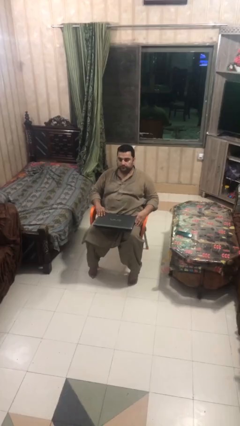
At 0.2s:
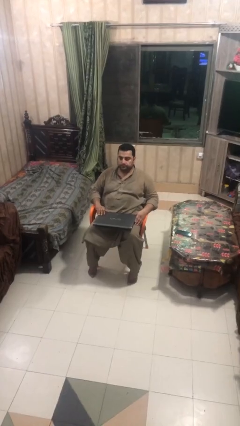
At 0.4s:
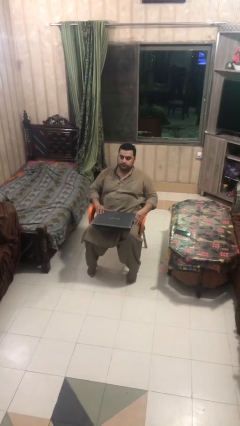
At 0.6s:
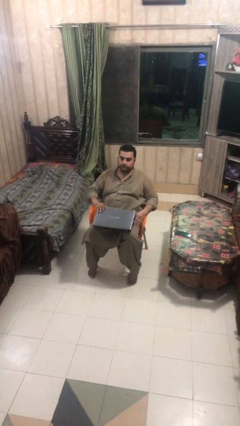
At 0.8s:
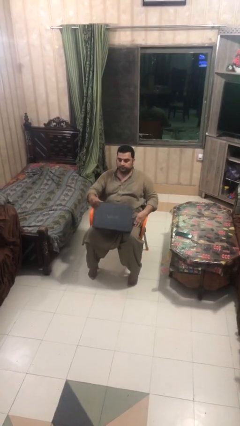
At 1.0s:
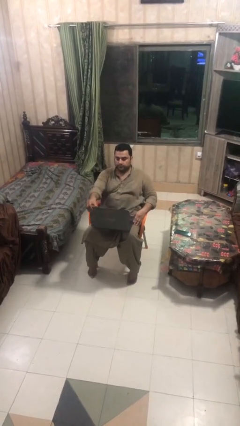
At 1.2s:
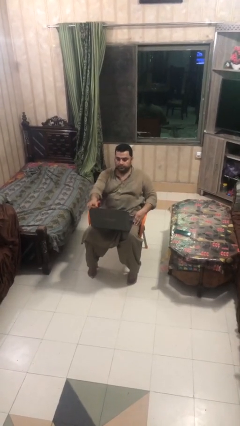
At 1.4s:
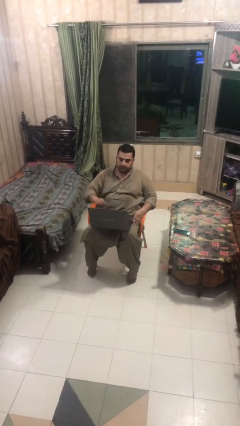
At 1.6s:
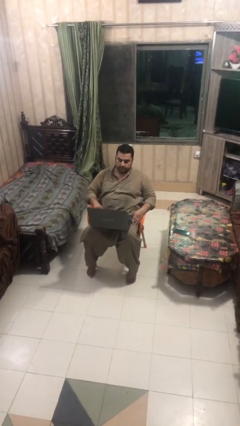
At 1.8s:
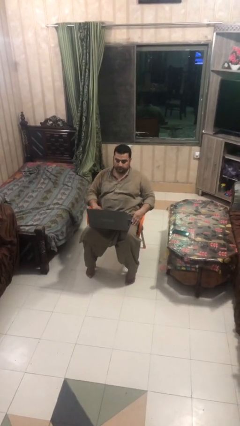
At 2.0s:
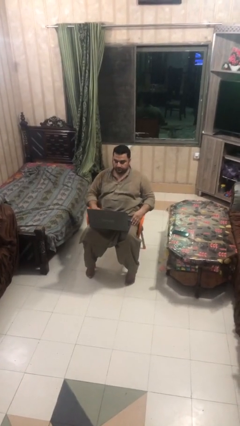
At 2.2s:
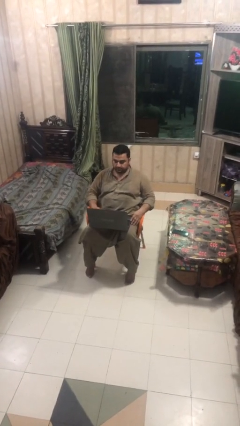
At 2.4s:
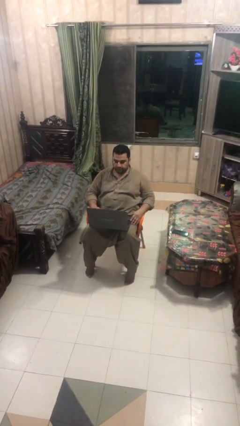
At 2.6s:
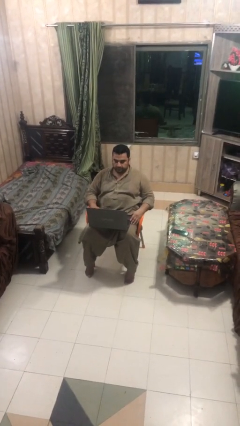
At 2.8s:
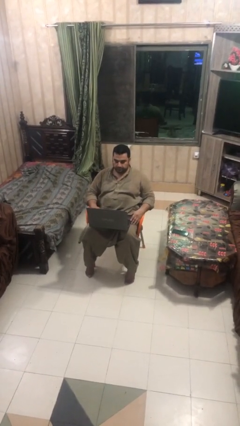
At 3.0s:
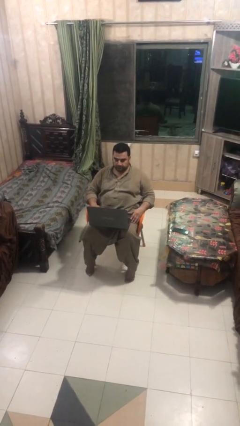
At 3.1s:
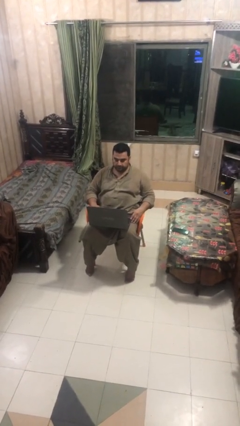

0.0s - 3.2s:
person opens laptop

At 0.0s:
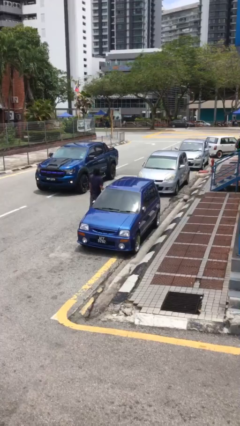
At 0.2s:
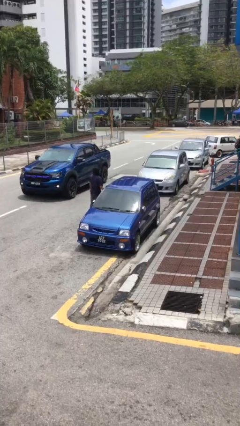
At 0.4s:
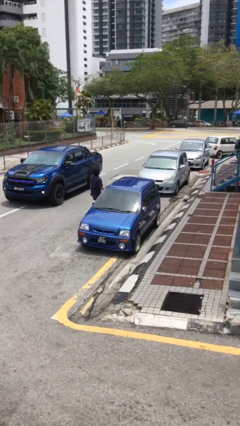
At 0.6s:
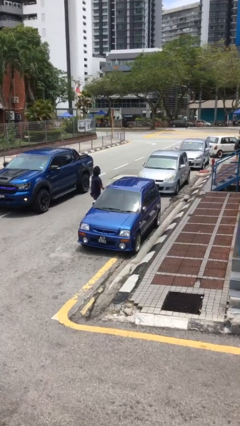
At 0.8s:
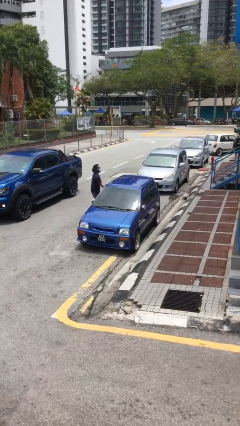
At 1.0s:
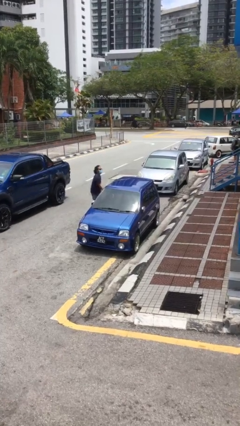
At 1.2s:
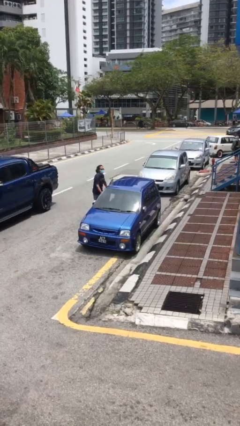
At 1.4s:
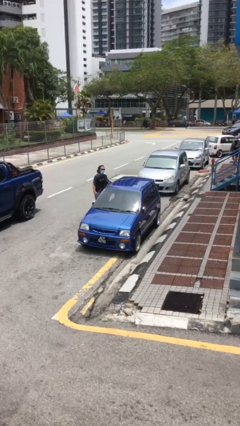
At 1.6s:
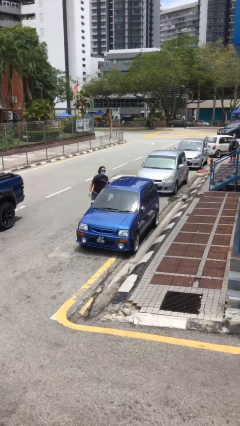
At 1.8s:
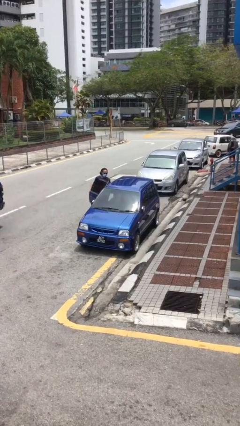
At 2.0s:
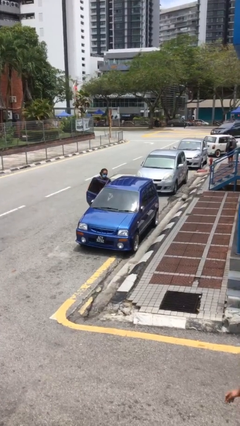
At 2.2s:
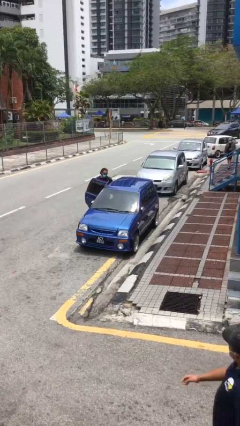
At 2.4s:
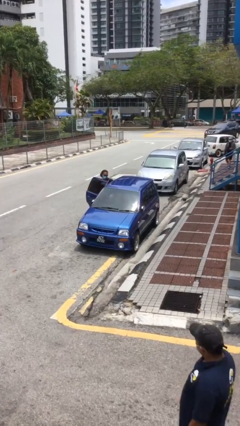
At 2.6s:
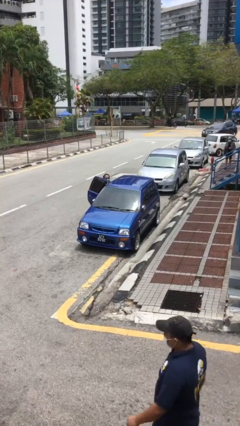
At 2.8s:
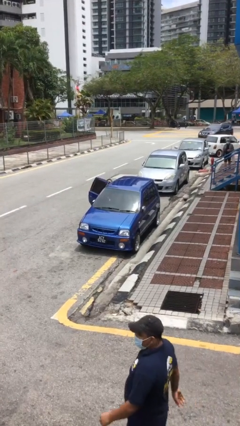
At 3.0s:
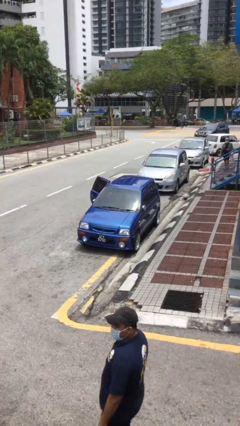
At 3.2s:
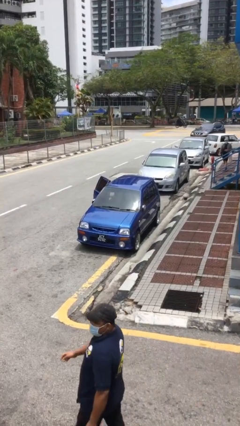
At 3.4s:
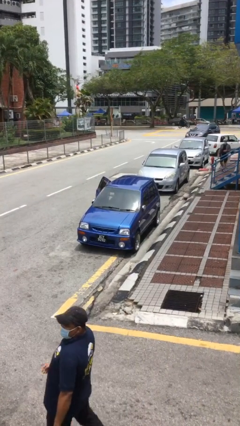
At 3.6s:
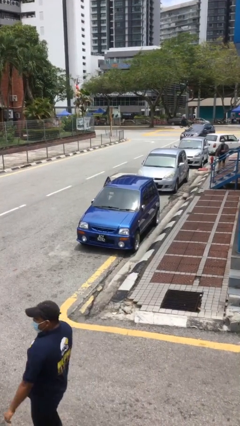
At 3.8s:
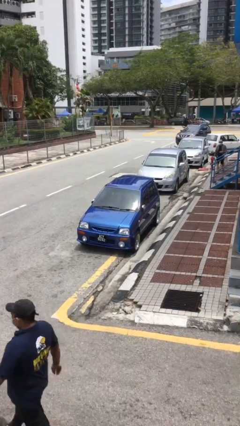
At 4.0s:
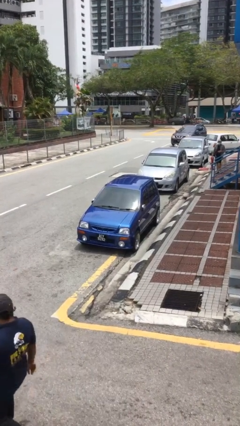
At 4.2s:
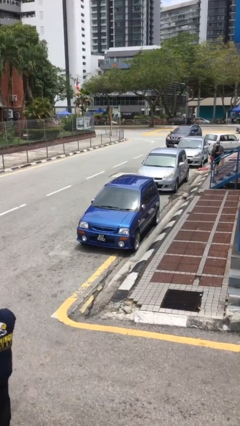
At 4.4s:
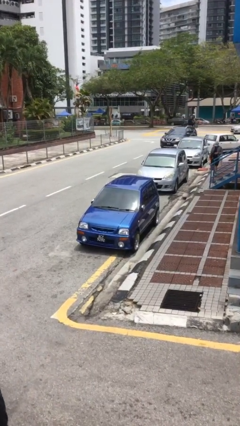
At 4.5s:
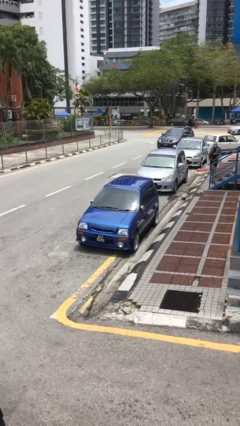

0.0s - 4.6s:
car picks up person

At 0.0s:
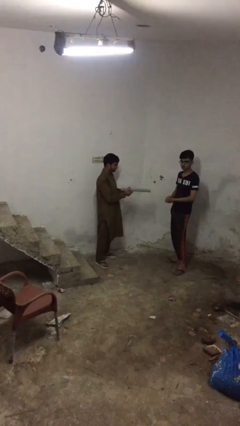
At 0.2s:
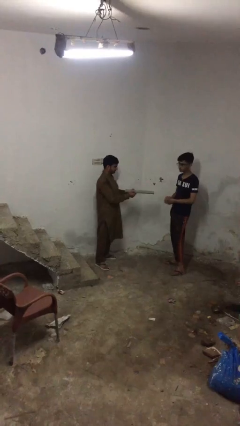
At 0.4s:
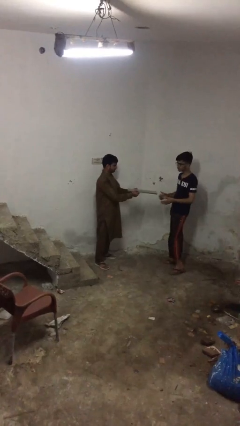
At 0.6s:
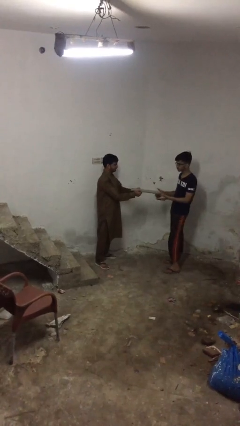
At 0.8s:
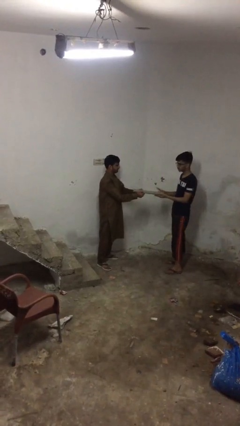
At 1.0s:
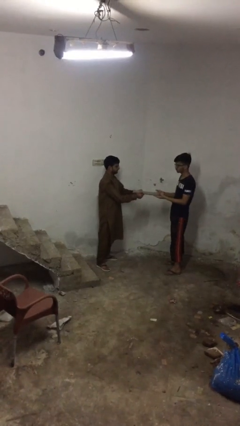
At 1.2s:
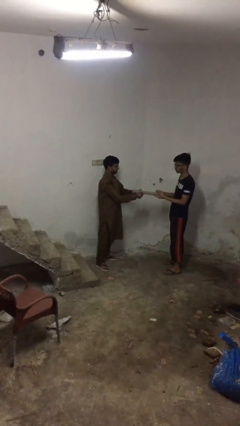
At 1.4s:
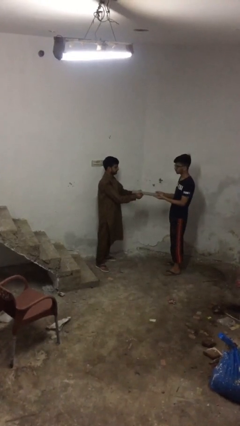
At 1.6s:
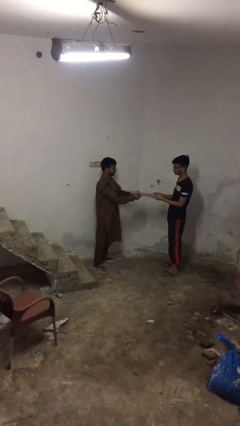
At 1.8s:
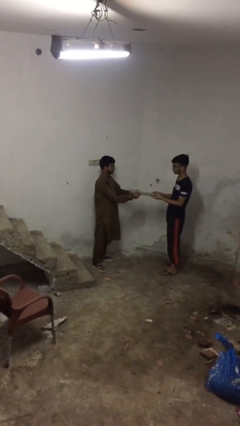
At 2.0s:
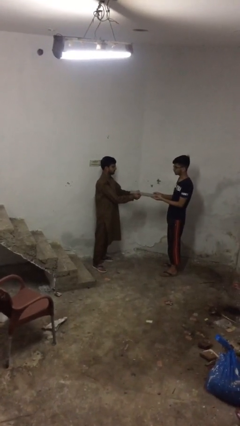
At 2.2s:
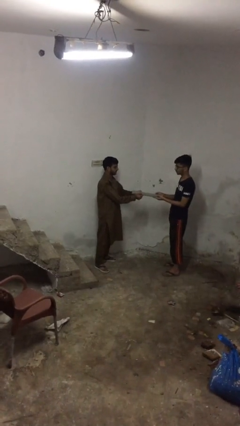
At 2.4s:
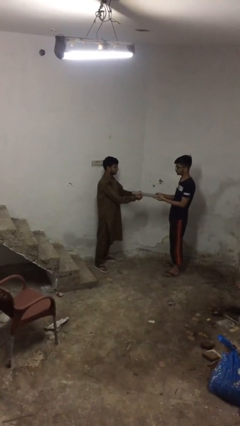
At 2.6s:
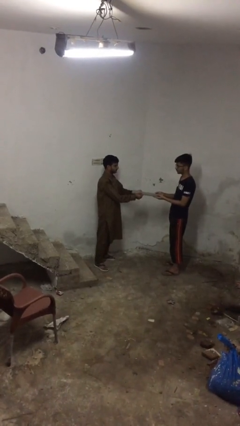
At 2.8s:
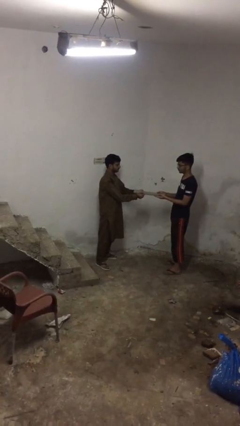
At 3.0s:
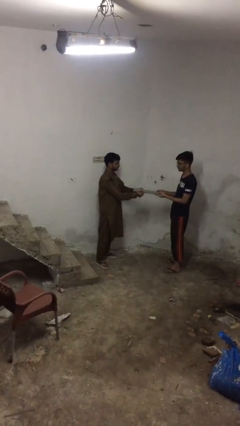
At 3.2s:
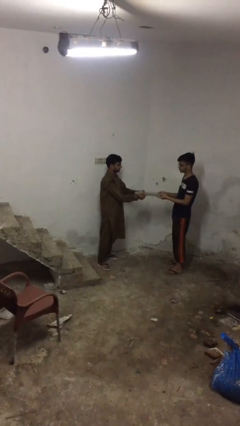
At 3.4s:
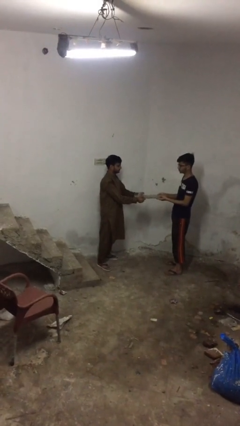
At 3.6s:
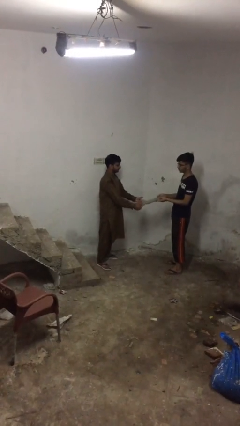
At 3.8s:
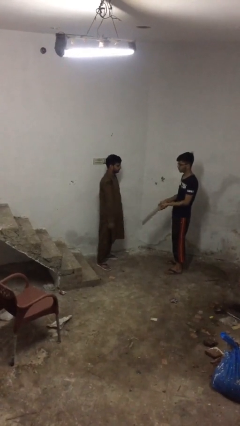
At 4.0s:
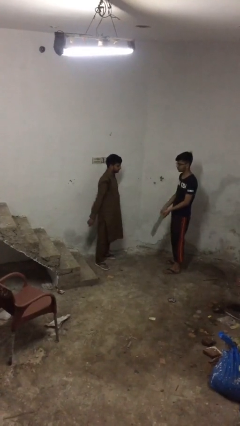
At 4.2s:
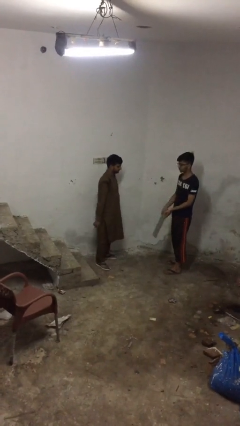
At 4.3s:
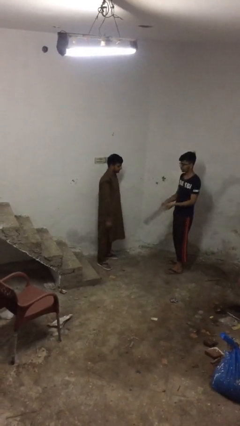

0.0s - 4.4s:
person transfers object to person

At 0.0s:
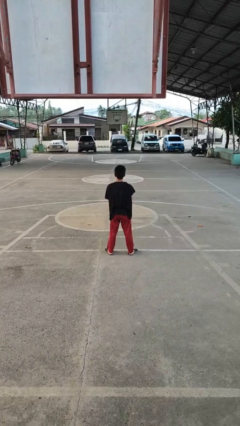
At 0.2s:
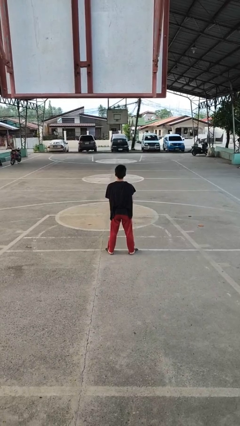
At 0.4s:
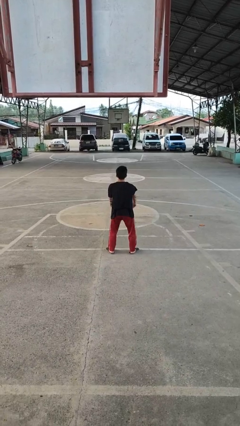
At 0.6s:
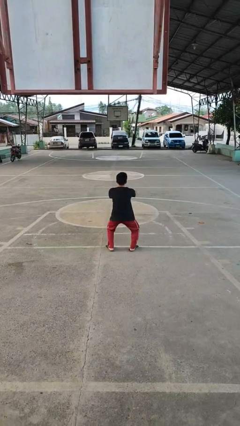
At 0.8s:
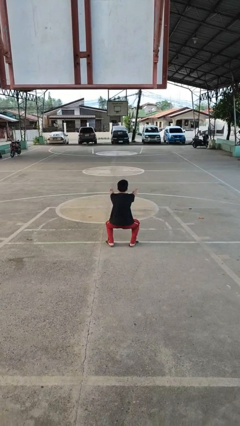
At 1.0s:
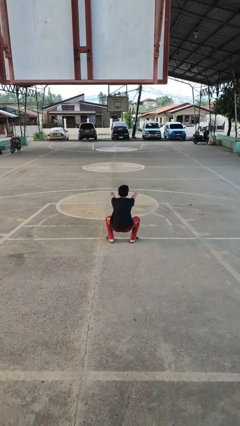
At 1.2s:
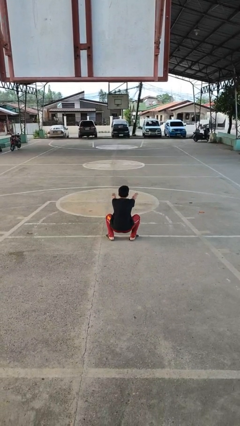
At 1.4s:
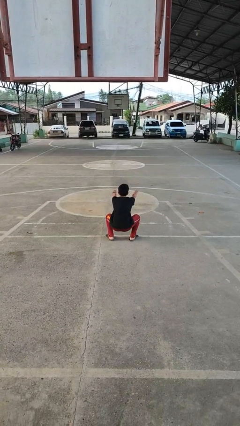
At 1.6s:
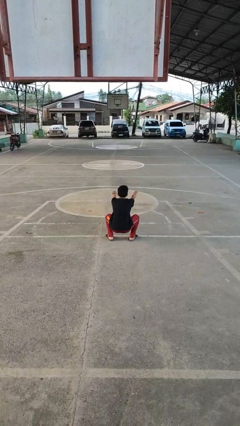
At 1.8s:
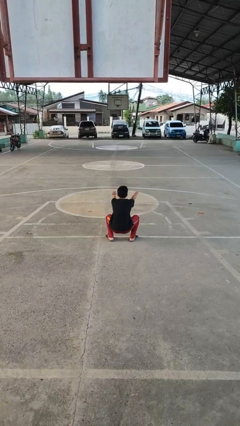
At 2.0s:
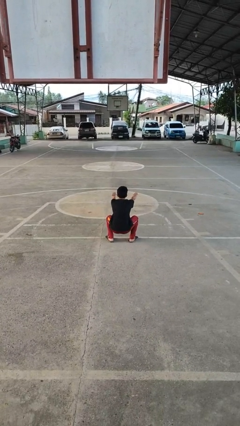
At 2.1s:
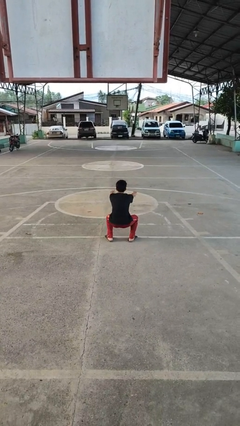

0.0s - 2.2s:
person squats

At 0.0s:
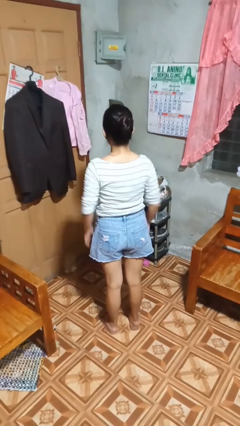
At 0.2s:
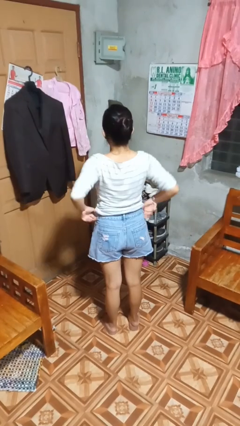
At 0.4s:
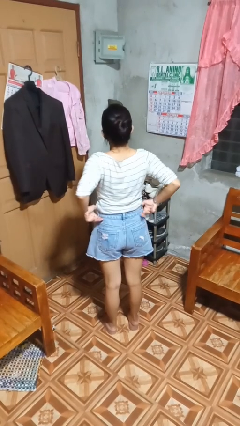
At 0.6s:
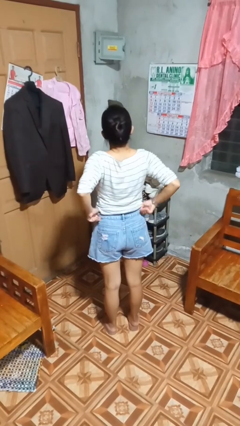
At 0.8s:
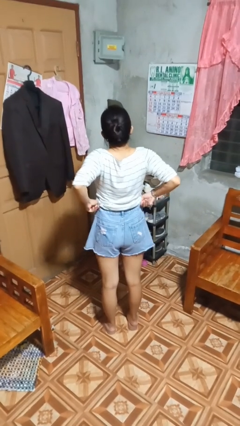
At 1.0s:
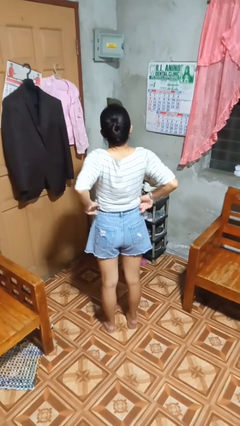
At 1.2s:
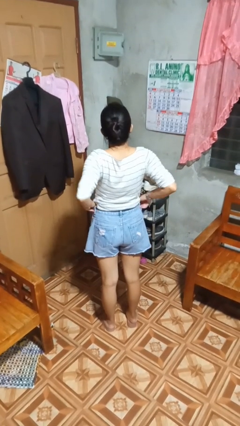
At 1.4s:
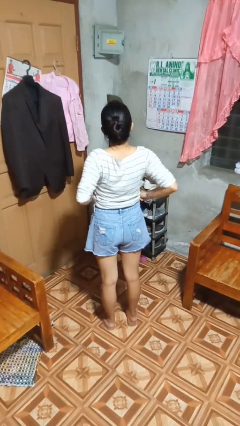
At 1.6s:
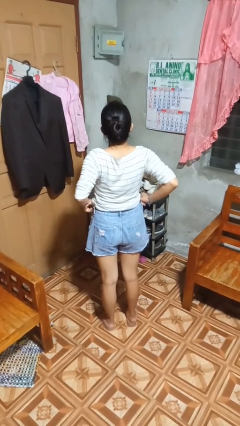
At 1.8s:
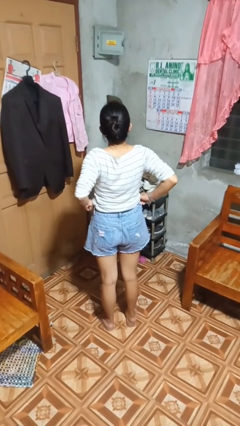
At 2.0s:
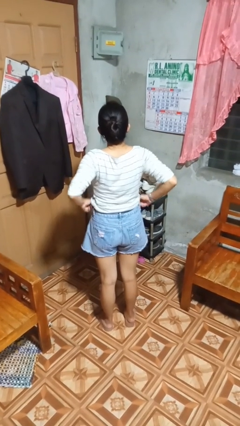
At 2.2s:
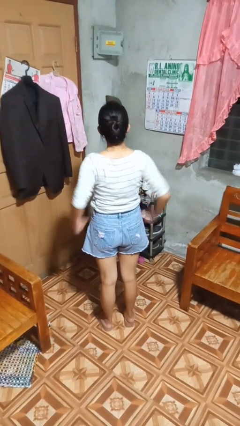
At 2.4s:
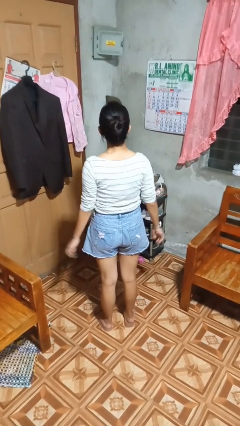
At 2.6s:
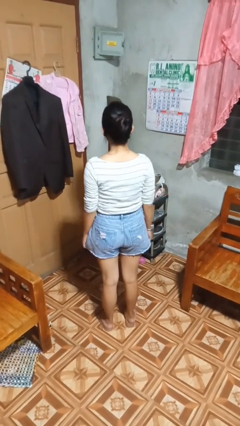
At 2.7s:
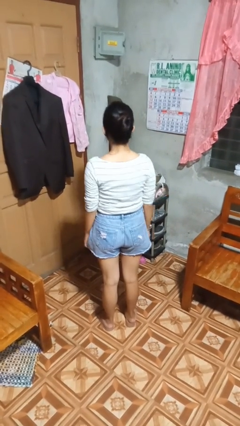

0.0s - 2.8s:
person hikes up pants

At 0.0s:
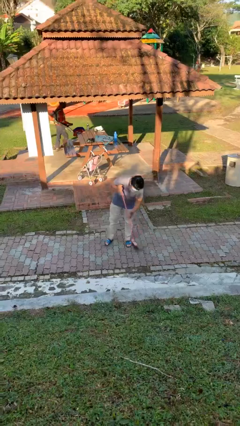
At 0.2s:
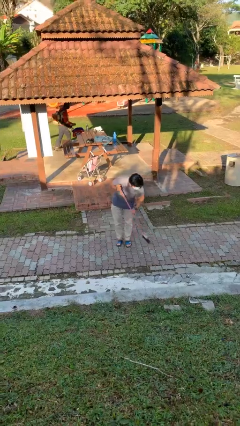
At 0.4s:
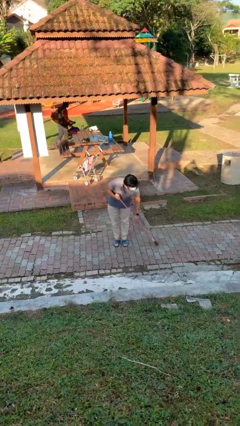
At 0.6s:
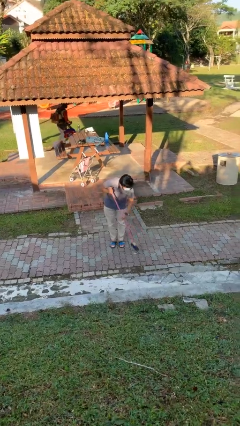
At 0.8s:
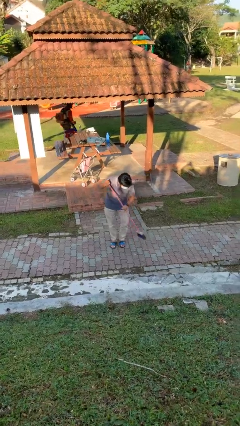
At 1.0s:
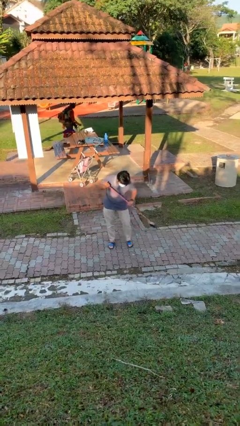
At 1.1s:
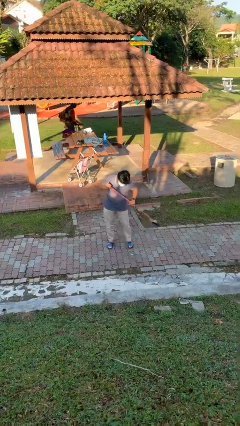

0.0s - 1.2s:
person sweeps floor
